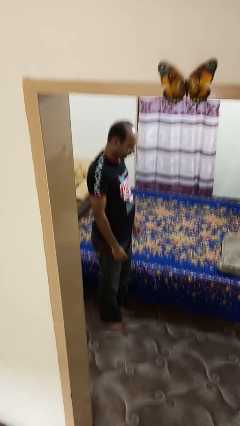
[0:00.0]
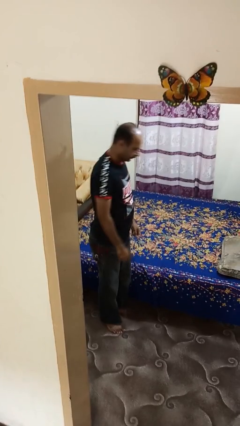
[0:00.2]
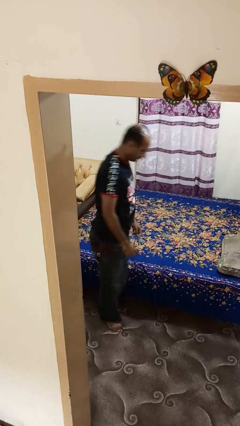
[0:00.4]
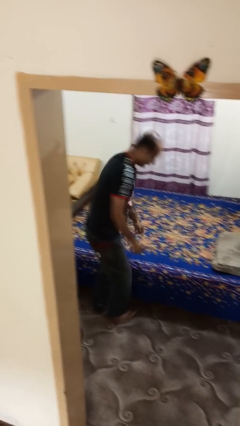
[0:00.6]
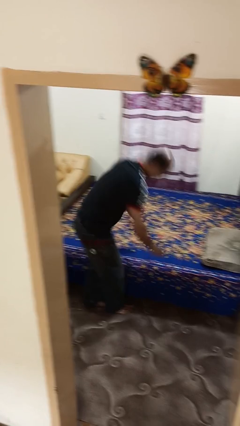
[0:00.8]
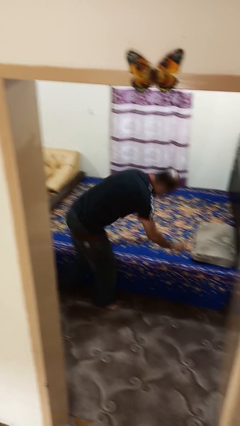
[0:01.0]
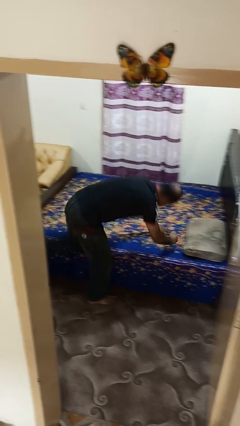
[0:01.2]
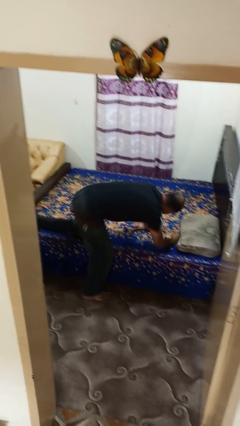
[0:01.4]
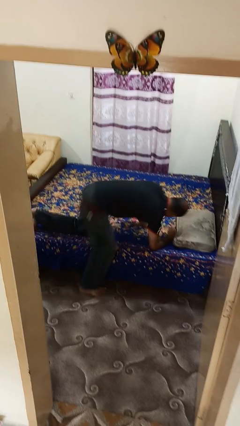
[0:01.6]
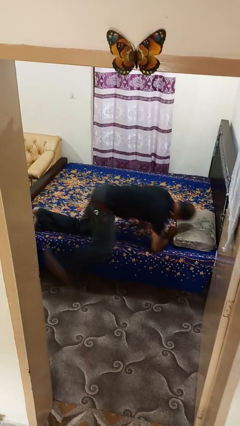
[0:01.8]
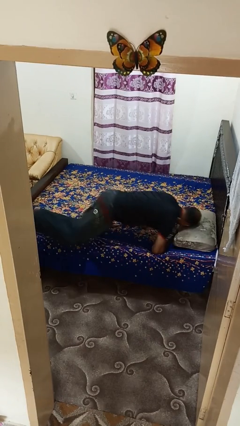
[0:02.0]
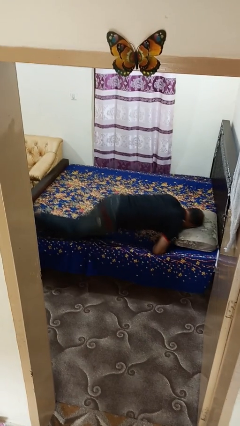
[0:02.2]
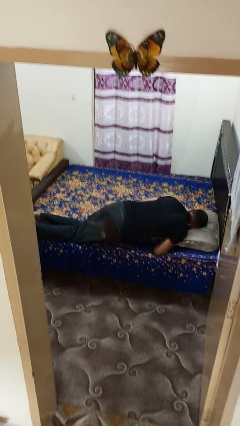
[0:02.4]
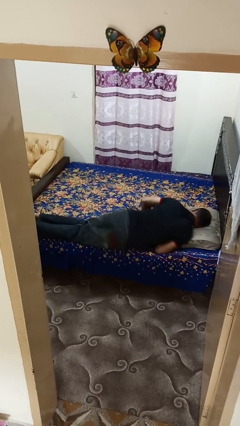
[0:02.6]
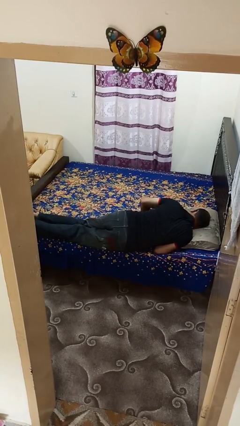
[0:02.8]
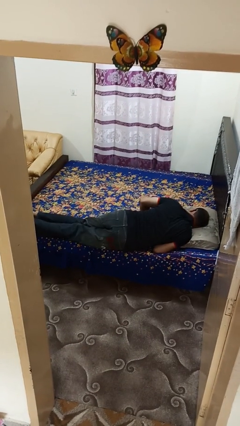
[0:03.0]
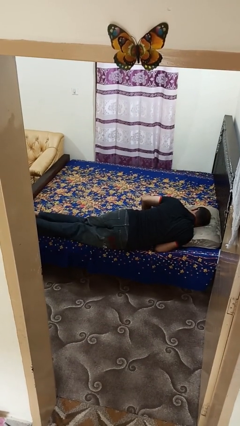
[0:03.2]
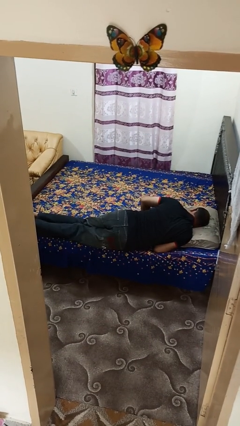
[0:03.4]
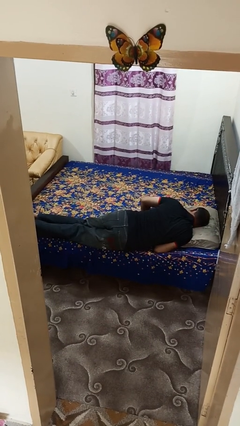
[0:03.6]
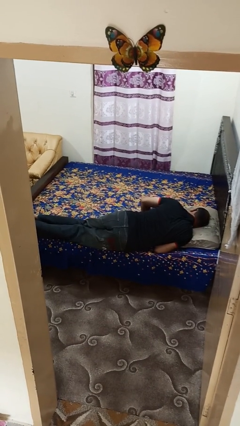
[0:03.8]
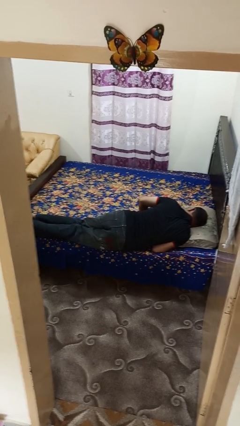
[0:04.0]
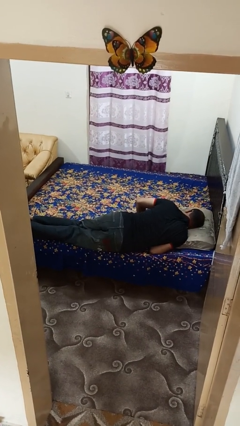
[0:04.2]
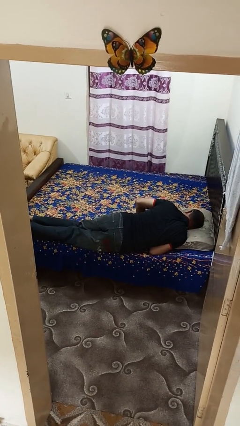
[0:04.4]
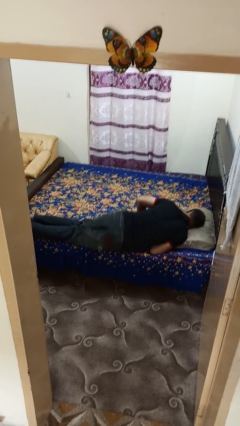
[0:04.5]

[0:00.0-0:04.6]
person lies down on bed

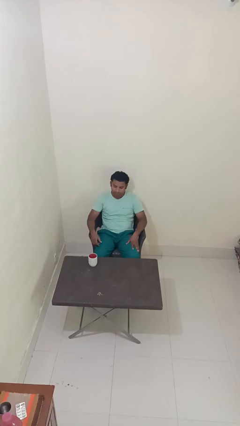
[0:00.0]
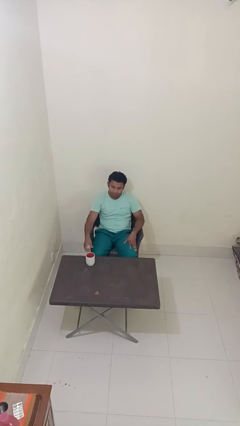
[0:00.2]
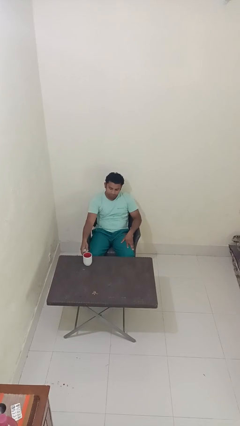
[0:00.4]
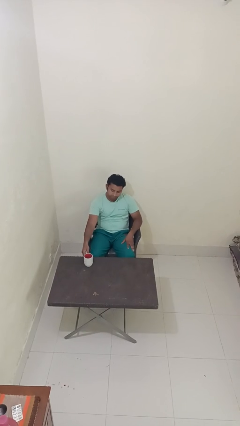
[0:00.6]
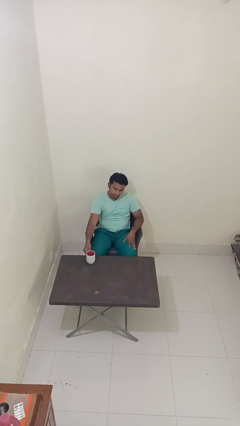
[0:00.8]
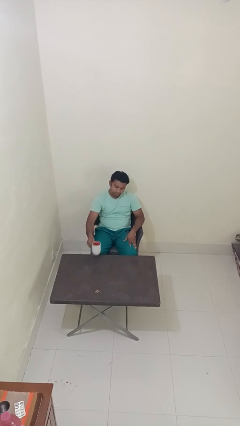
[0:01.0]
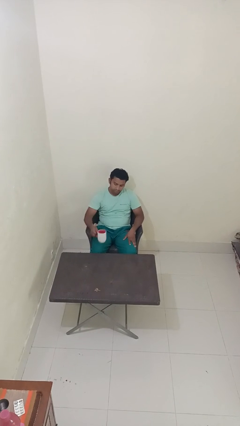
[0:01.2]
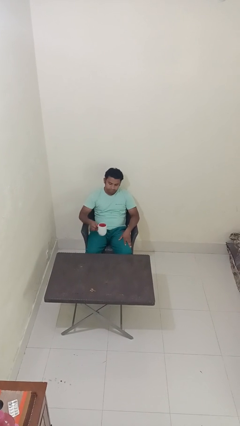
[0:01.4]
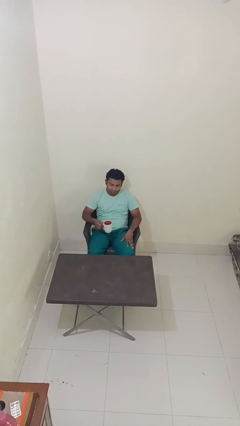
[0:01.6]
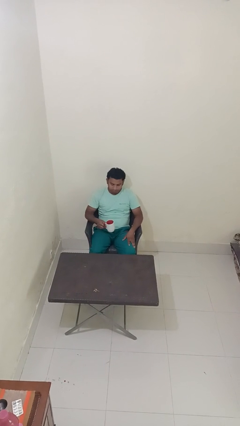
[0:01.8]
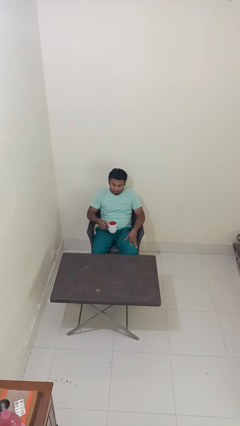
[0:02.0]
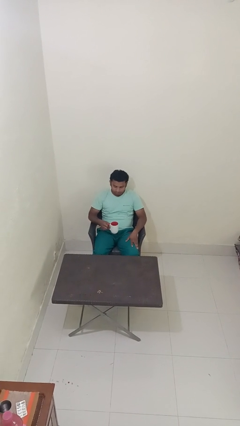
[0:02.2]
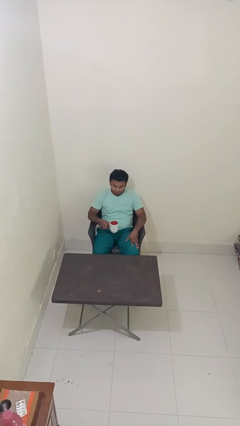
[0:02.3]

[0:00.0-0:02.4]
person picks up object from table

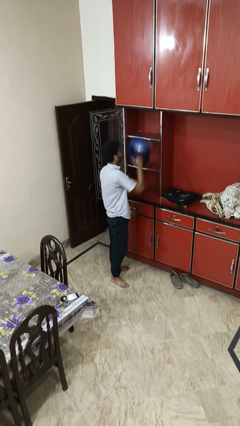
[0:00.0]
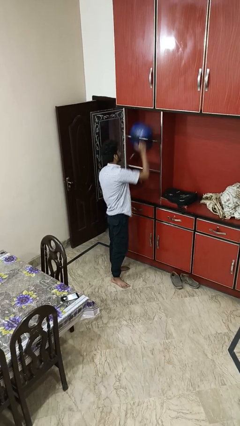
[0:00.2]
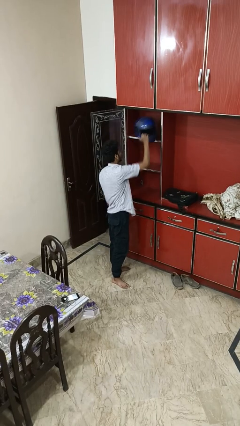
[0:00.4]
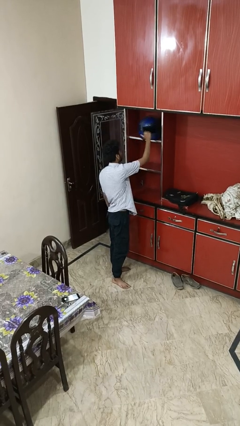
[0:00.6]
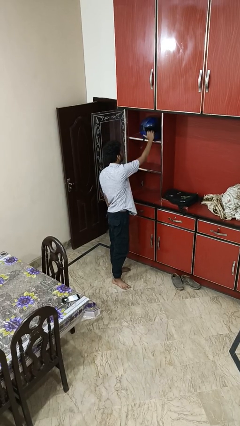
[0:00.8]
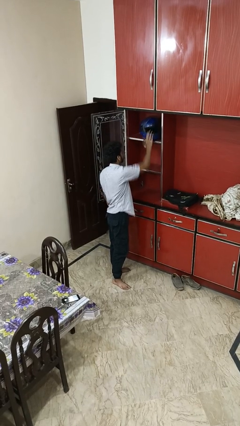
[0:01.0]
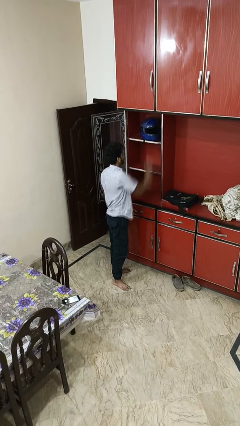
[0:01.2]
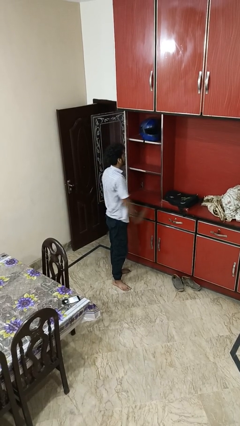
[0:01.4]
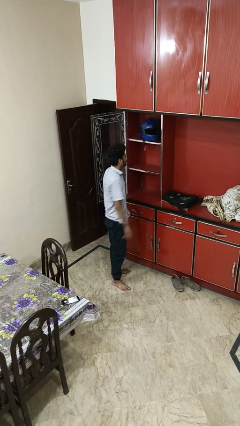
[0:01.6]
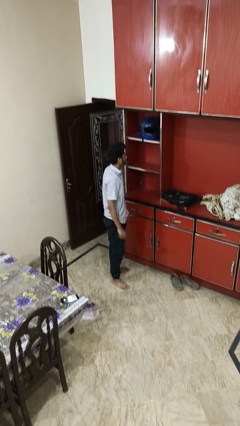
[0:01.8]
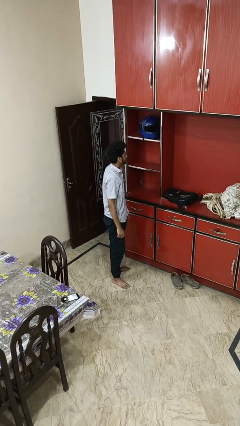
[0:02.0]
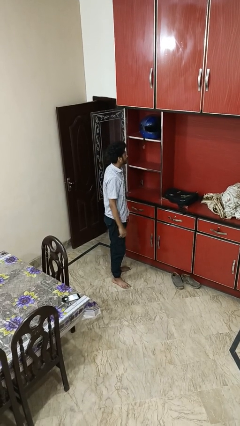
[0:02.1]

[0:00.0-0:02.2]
person puts down object on shelf

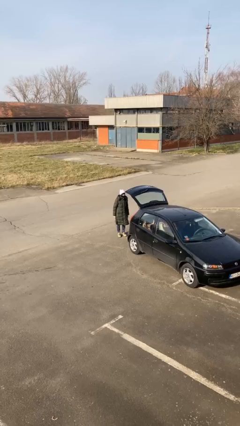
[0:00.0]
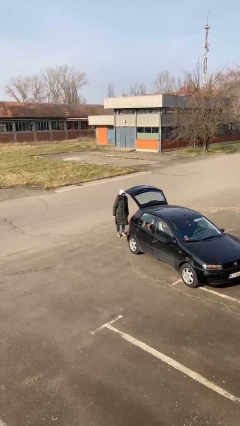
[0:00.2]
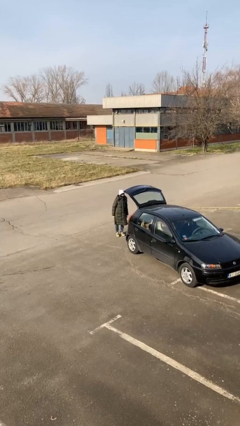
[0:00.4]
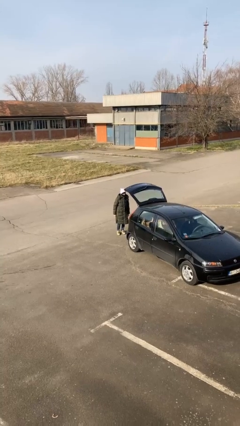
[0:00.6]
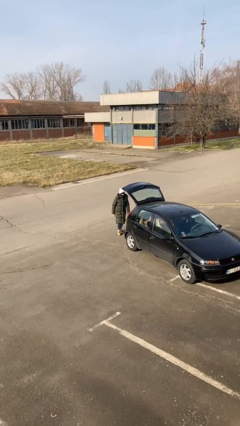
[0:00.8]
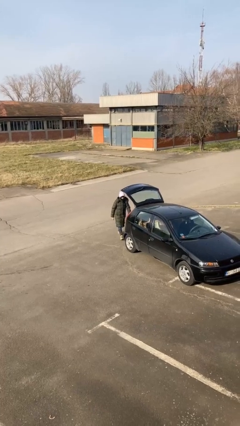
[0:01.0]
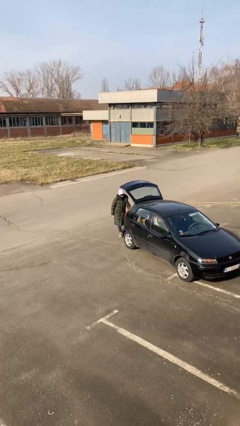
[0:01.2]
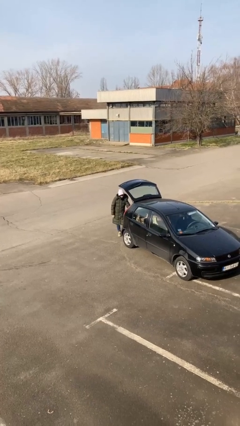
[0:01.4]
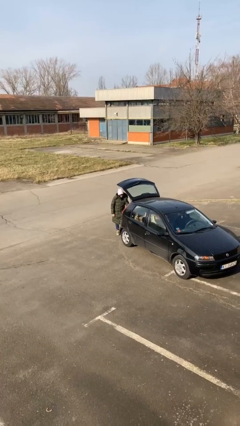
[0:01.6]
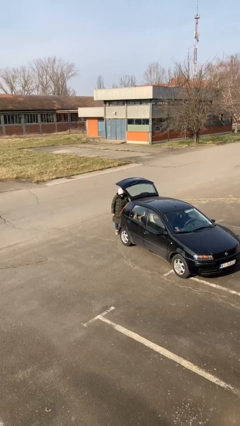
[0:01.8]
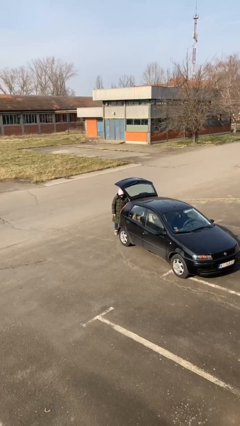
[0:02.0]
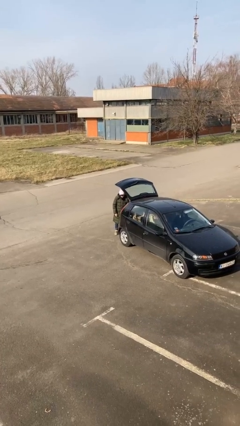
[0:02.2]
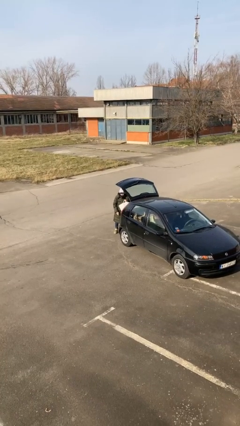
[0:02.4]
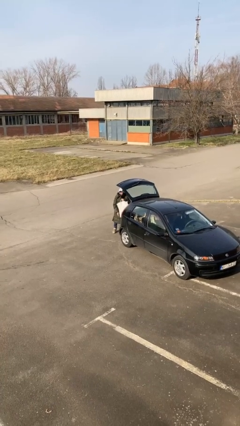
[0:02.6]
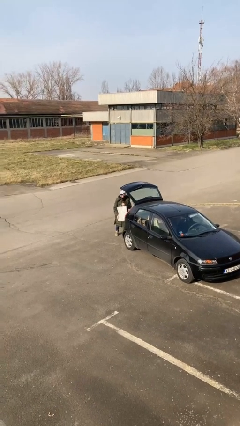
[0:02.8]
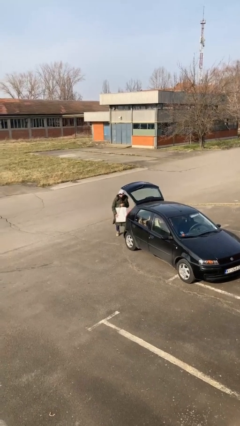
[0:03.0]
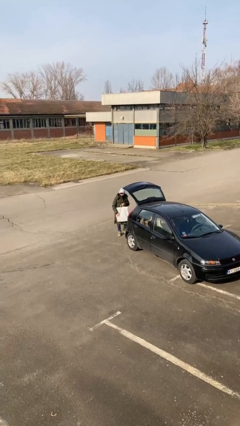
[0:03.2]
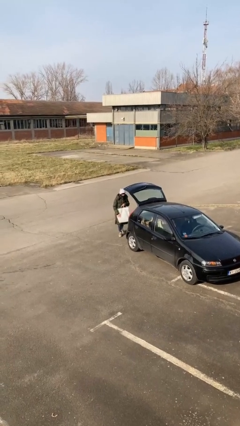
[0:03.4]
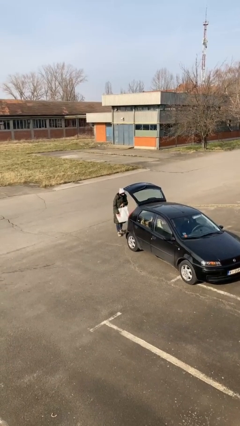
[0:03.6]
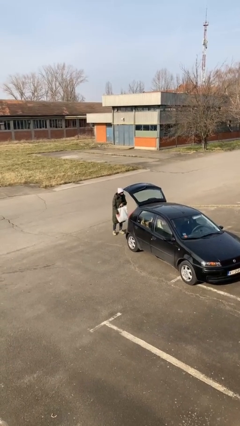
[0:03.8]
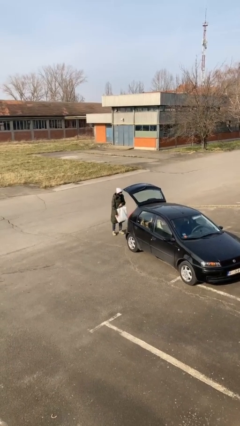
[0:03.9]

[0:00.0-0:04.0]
person unloads car

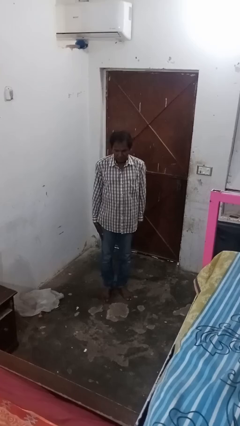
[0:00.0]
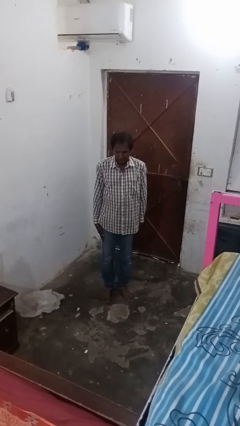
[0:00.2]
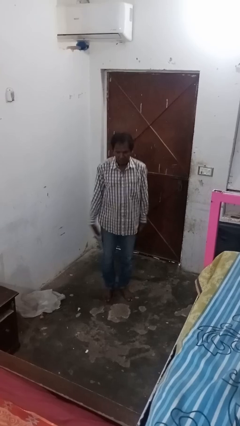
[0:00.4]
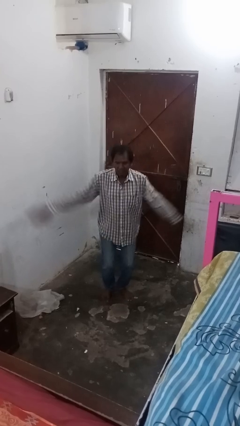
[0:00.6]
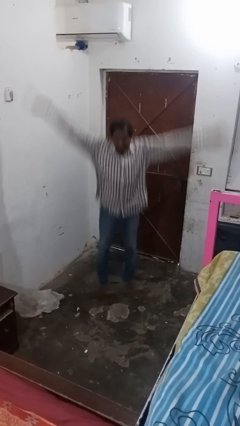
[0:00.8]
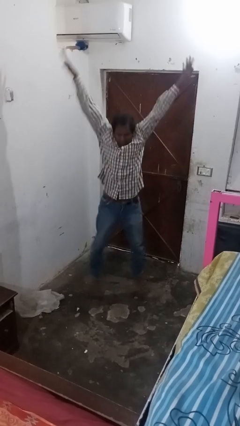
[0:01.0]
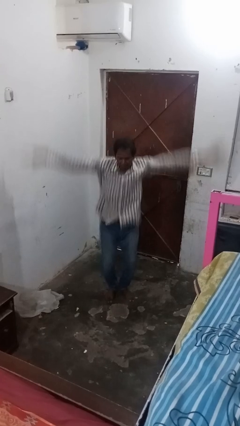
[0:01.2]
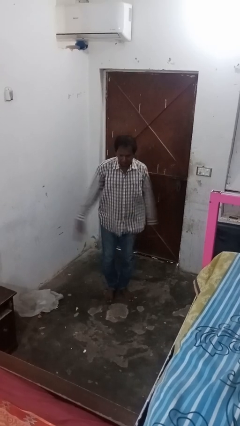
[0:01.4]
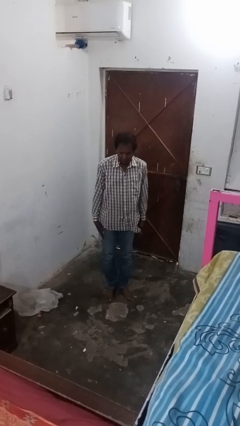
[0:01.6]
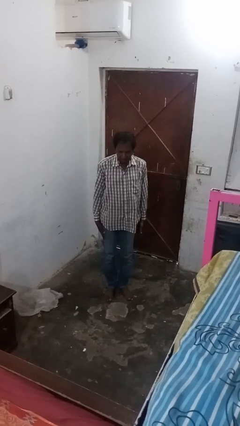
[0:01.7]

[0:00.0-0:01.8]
person exercises with jumping jacks

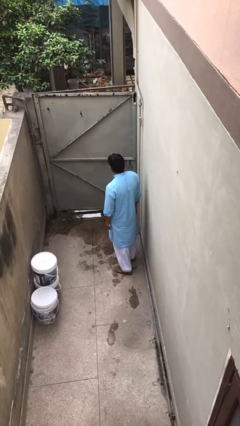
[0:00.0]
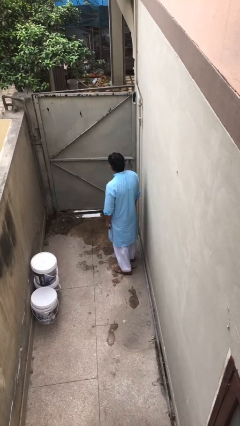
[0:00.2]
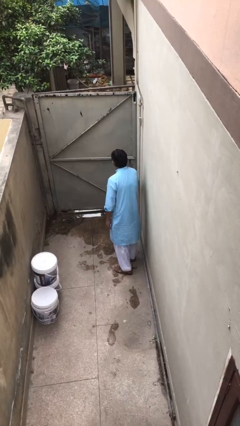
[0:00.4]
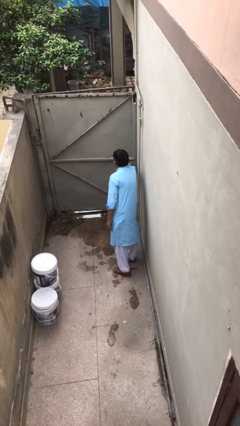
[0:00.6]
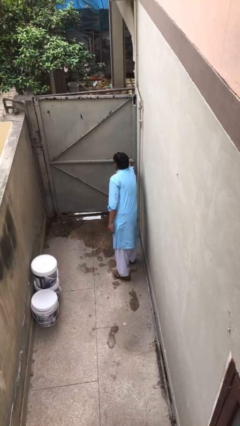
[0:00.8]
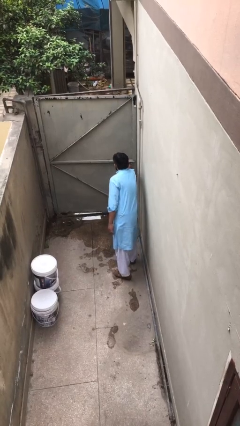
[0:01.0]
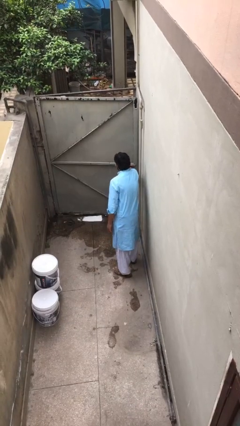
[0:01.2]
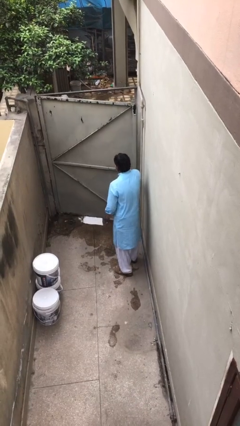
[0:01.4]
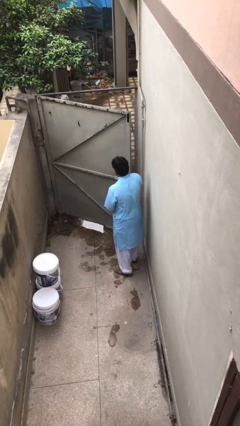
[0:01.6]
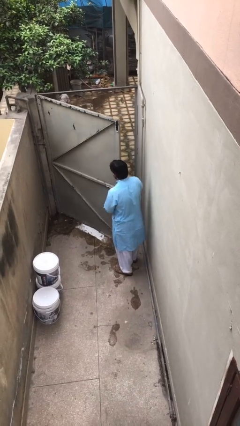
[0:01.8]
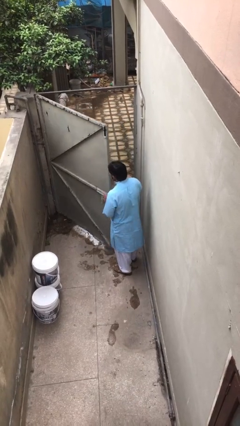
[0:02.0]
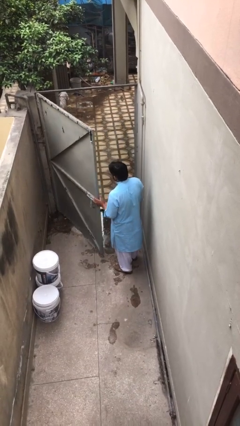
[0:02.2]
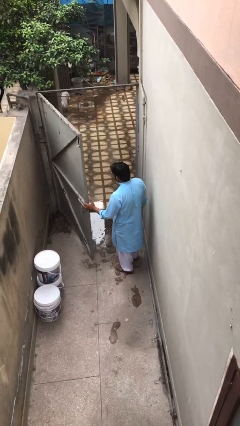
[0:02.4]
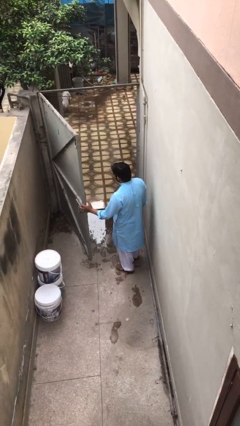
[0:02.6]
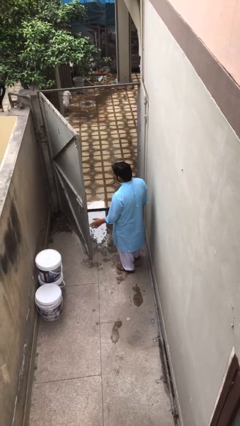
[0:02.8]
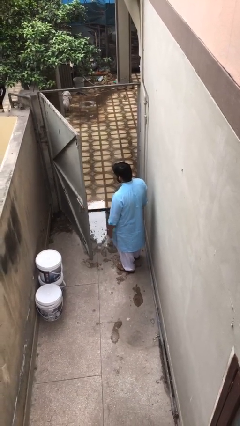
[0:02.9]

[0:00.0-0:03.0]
person opens facility door
